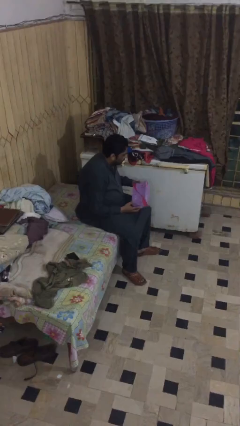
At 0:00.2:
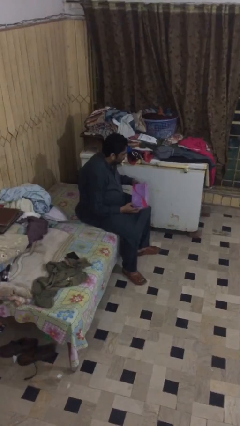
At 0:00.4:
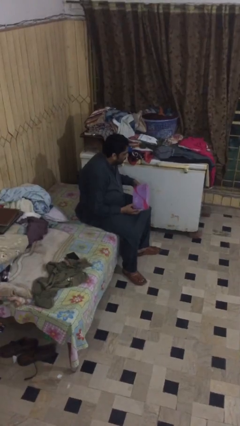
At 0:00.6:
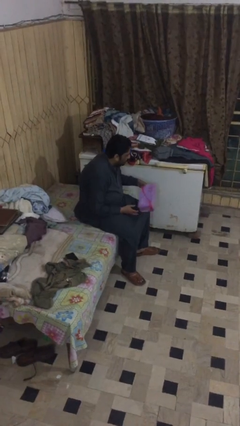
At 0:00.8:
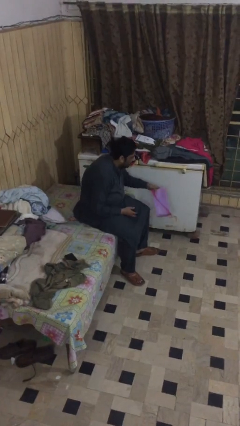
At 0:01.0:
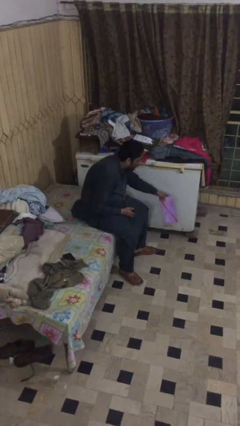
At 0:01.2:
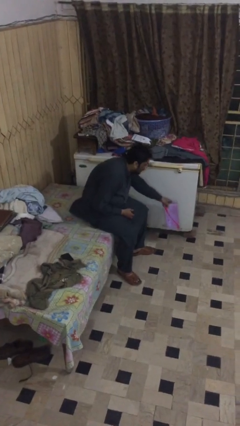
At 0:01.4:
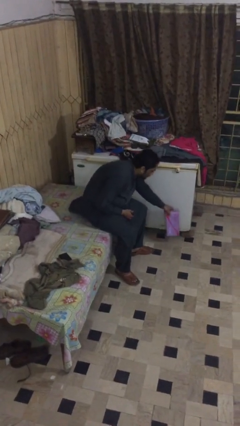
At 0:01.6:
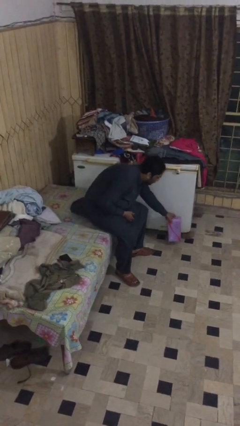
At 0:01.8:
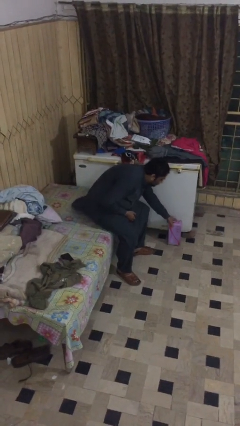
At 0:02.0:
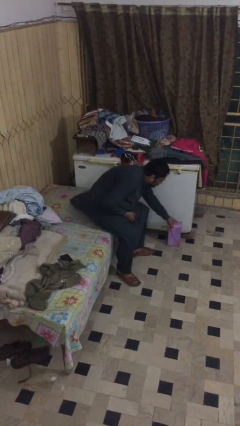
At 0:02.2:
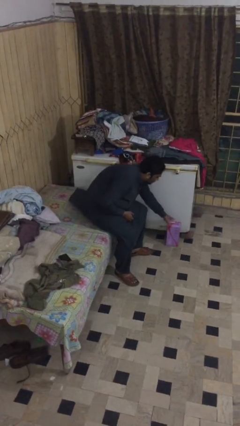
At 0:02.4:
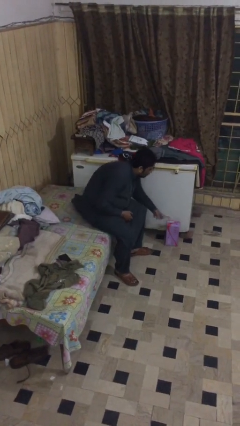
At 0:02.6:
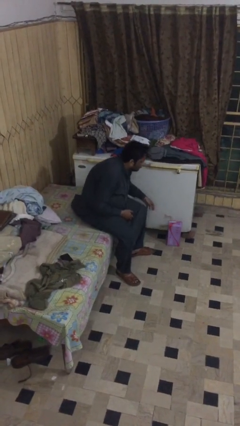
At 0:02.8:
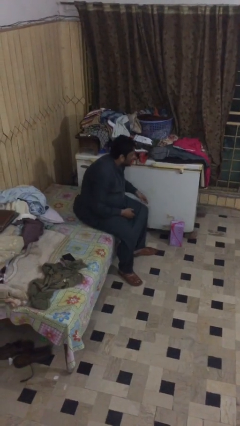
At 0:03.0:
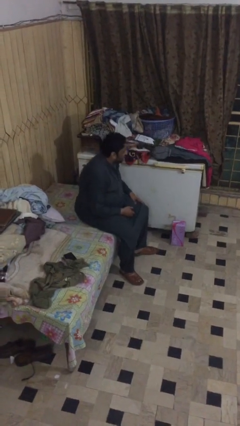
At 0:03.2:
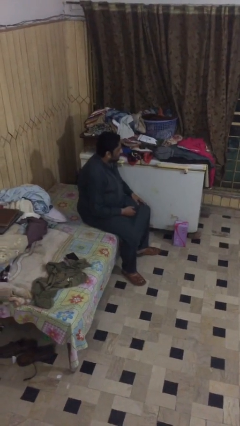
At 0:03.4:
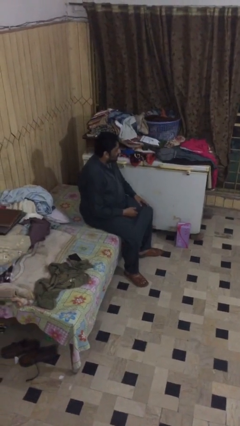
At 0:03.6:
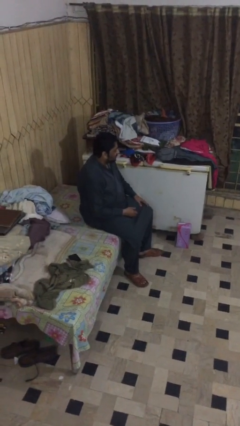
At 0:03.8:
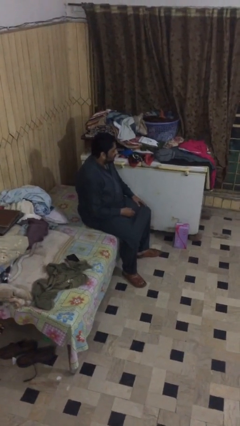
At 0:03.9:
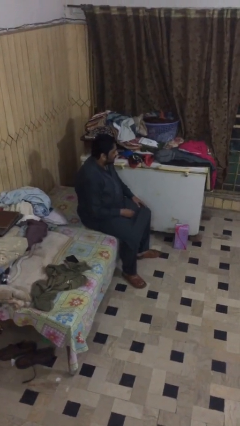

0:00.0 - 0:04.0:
person puts down object on floor

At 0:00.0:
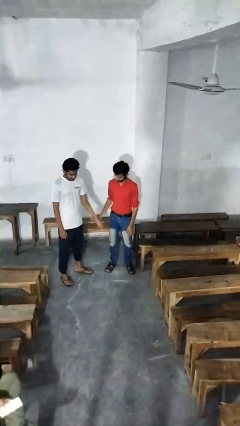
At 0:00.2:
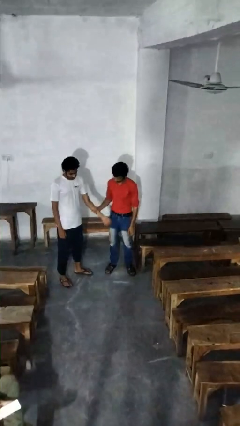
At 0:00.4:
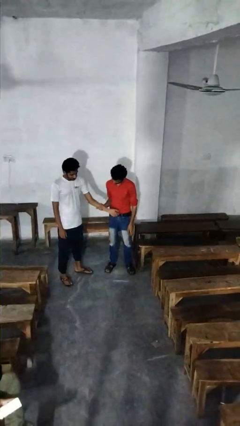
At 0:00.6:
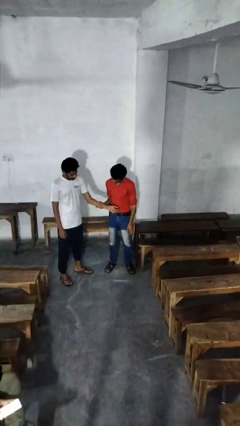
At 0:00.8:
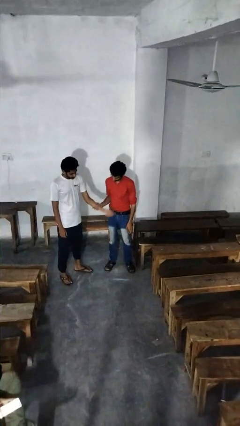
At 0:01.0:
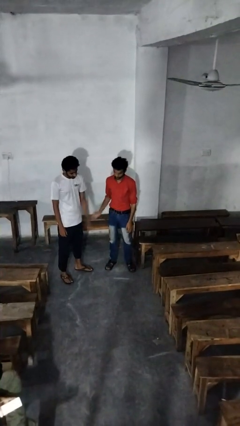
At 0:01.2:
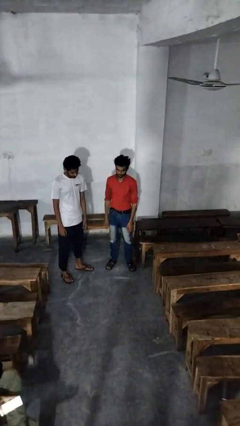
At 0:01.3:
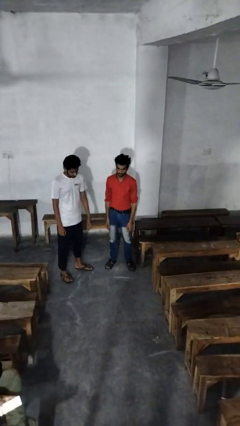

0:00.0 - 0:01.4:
person grabs person by forearm

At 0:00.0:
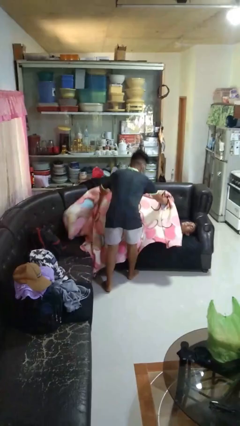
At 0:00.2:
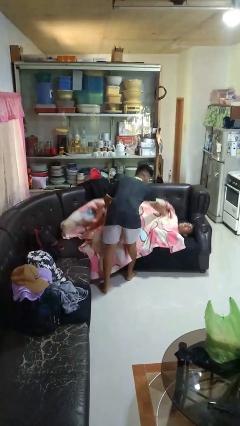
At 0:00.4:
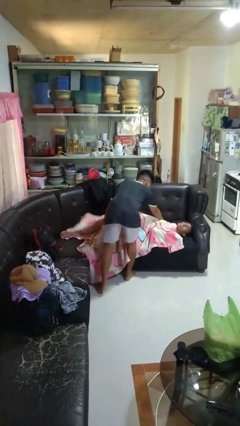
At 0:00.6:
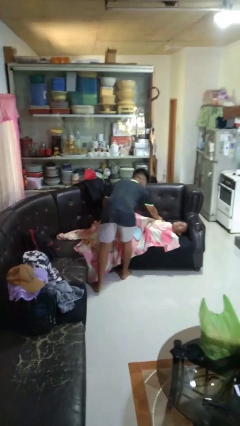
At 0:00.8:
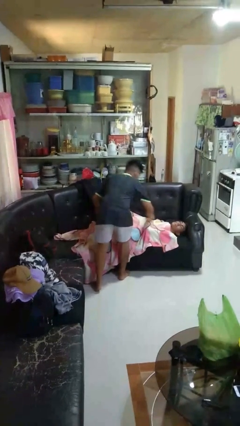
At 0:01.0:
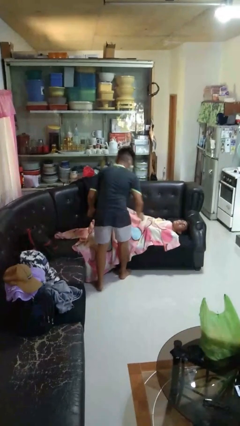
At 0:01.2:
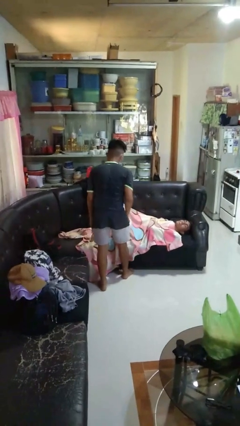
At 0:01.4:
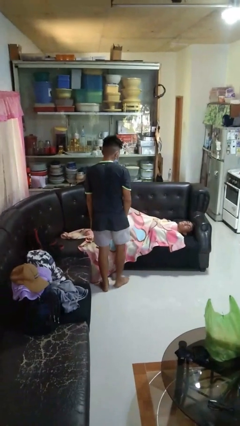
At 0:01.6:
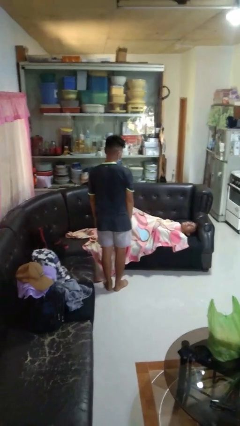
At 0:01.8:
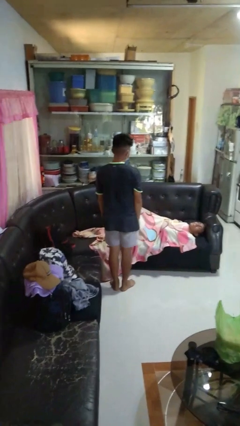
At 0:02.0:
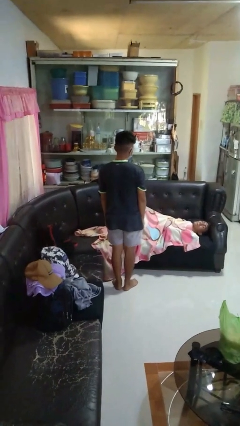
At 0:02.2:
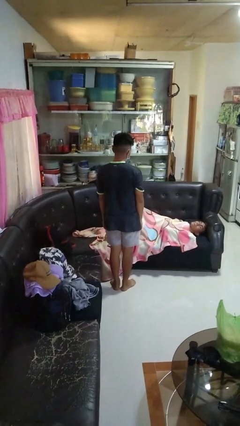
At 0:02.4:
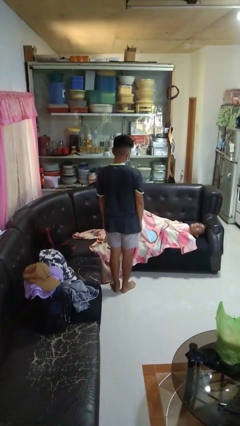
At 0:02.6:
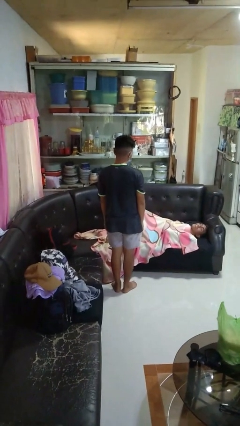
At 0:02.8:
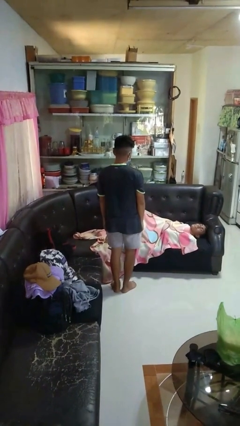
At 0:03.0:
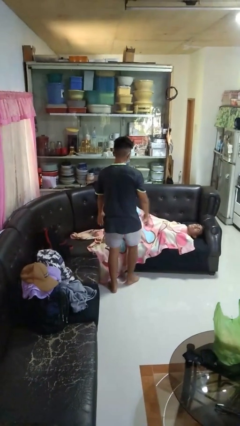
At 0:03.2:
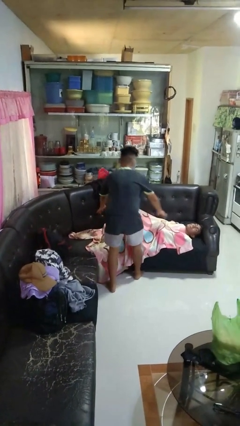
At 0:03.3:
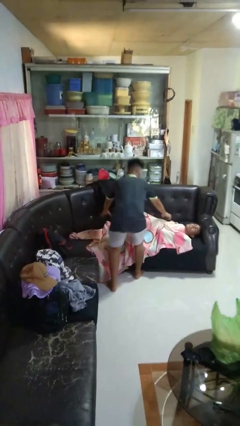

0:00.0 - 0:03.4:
person covers friend with blanket

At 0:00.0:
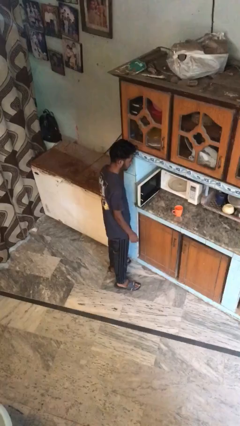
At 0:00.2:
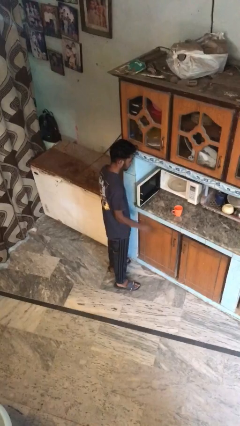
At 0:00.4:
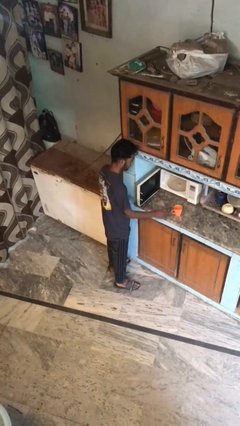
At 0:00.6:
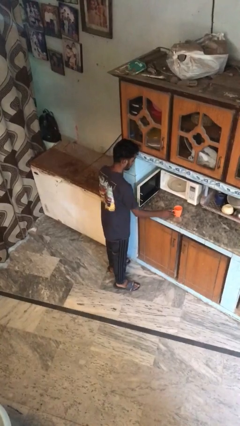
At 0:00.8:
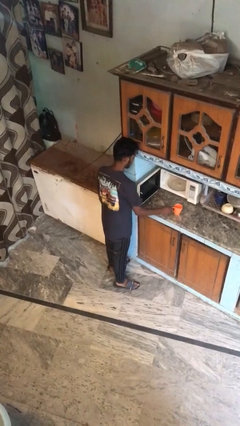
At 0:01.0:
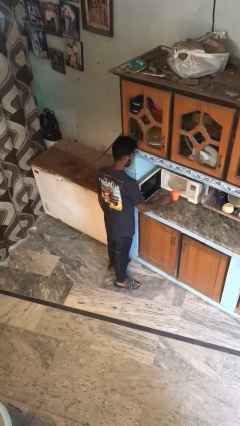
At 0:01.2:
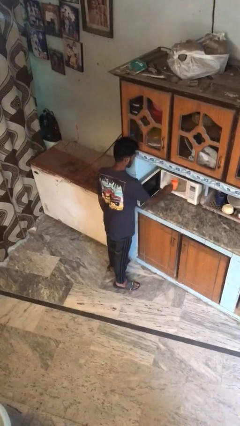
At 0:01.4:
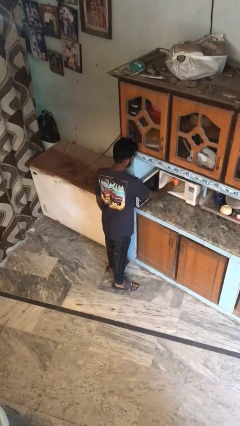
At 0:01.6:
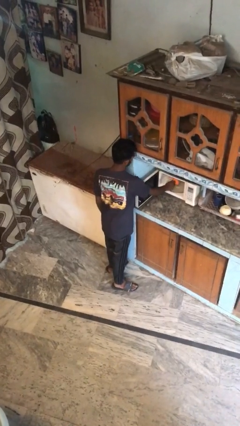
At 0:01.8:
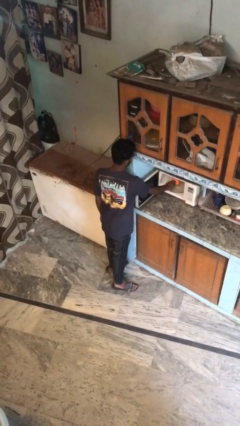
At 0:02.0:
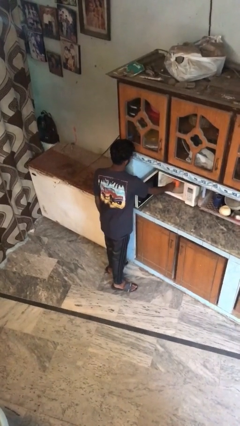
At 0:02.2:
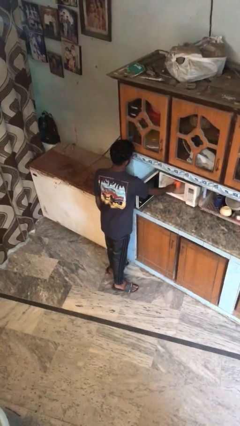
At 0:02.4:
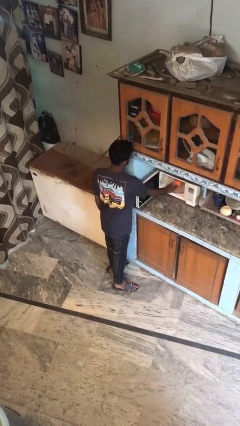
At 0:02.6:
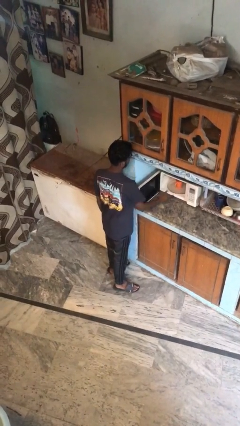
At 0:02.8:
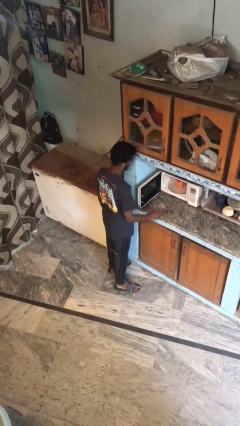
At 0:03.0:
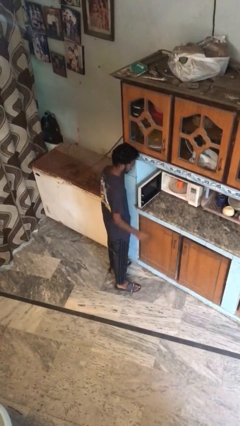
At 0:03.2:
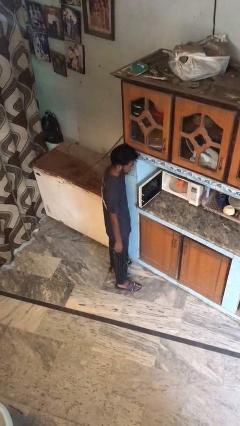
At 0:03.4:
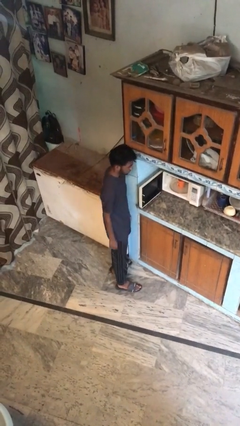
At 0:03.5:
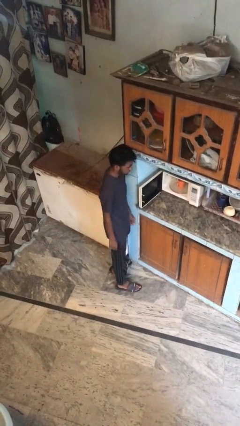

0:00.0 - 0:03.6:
person puts object into microwave

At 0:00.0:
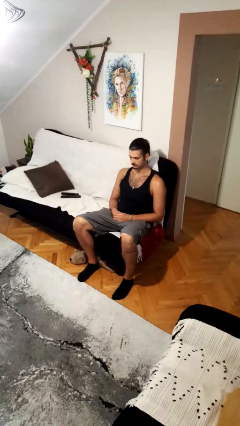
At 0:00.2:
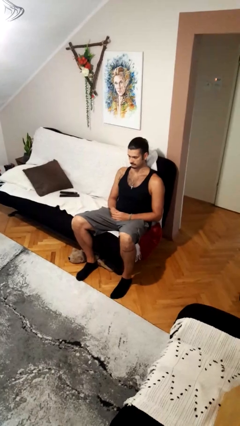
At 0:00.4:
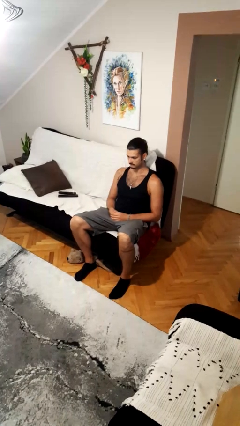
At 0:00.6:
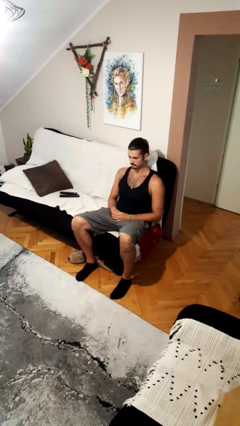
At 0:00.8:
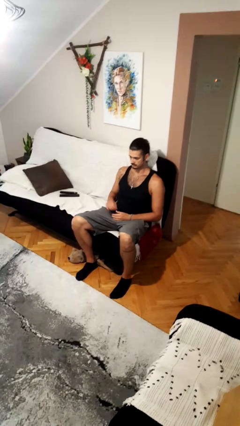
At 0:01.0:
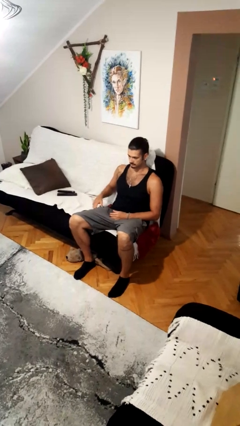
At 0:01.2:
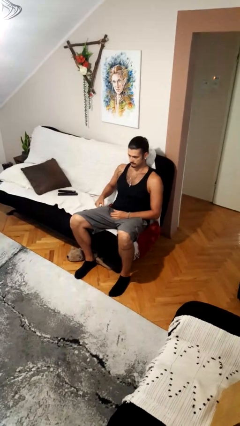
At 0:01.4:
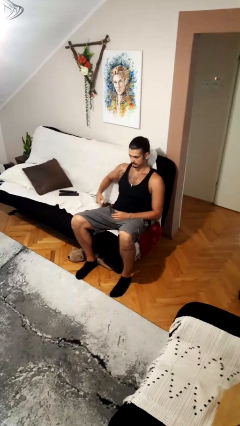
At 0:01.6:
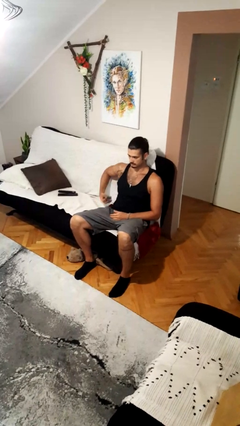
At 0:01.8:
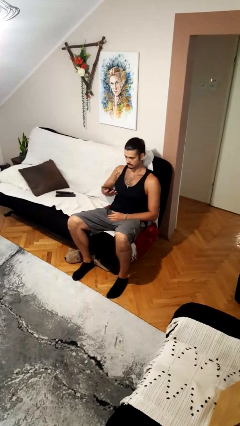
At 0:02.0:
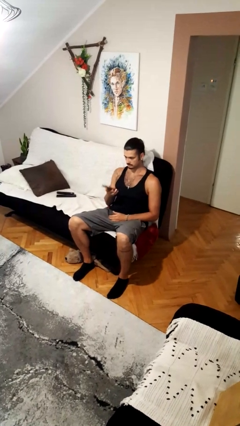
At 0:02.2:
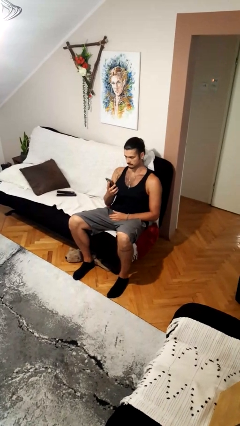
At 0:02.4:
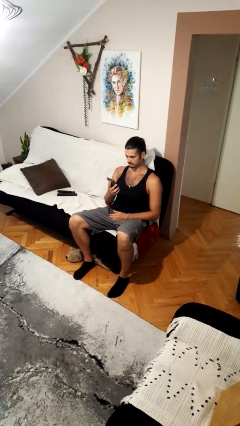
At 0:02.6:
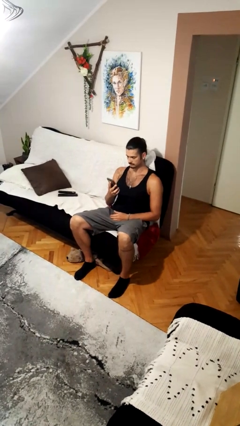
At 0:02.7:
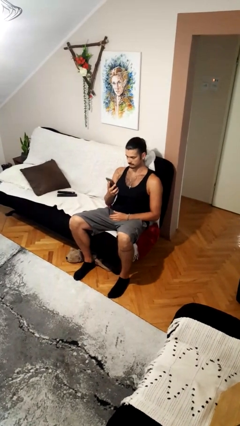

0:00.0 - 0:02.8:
person takes phone from pocket

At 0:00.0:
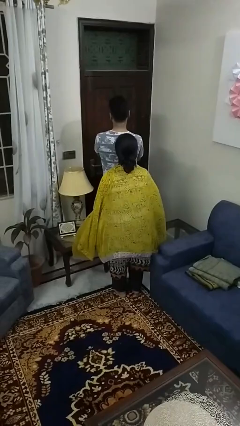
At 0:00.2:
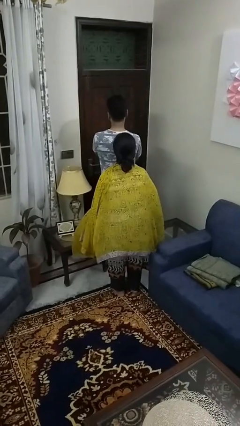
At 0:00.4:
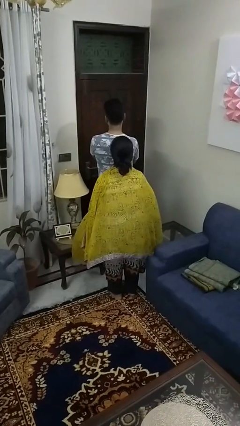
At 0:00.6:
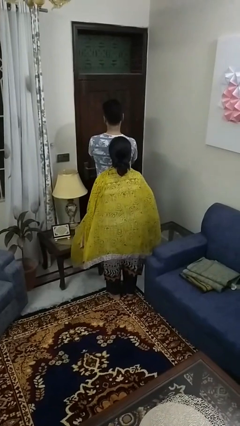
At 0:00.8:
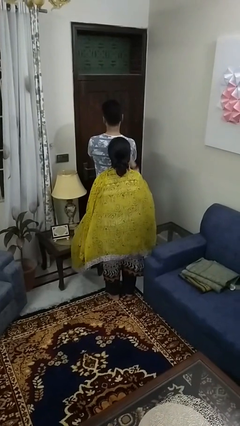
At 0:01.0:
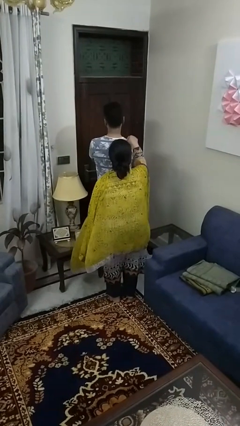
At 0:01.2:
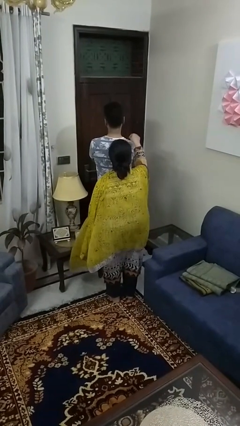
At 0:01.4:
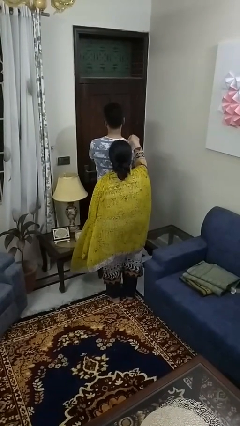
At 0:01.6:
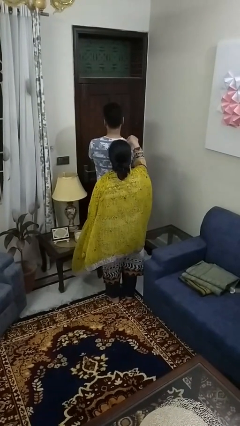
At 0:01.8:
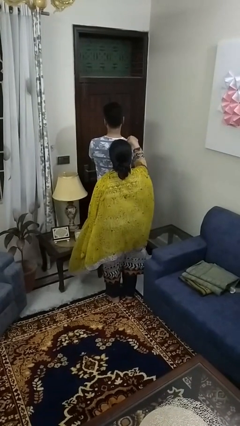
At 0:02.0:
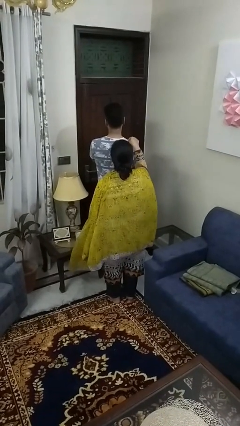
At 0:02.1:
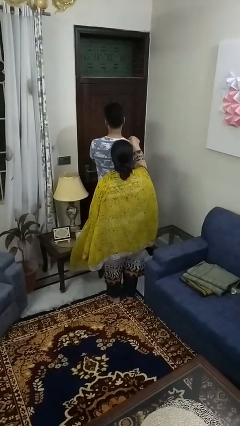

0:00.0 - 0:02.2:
person touches back of person
